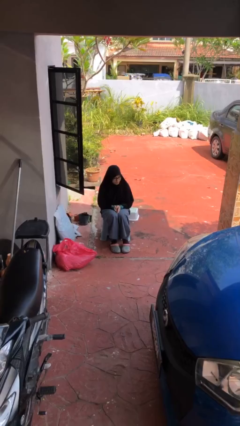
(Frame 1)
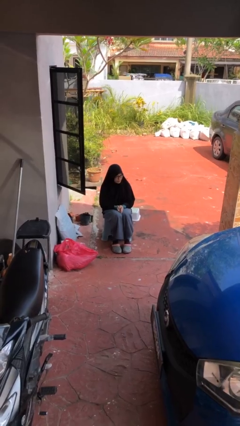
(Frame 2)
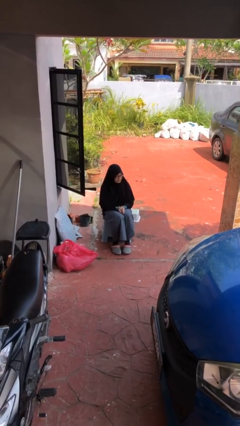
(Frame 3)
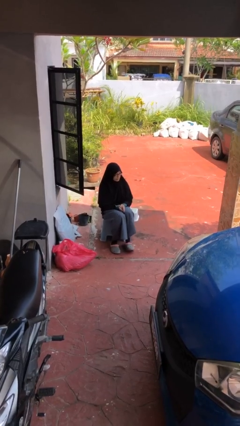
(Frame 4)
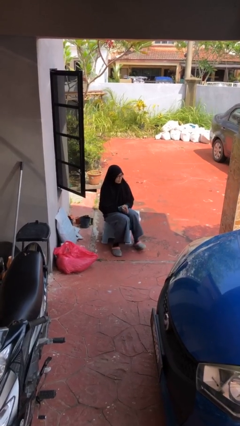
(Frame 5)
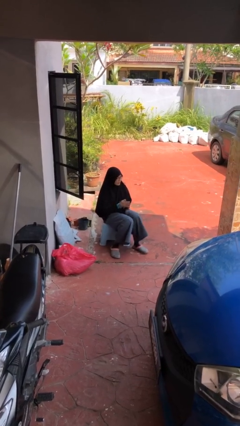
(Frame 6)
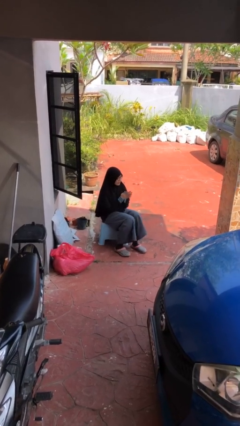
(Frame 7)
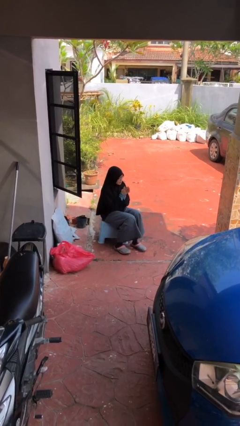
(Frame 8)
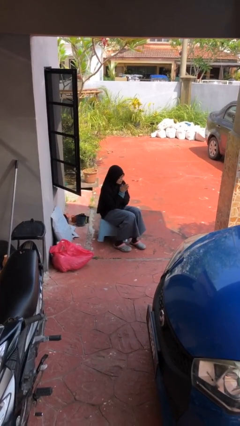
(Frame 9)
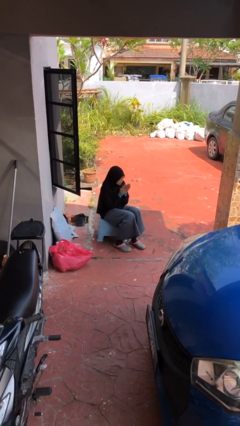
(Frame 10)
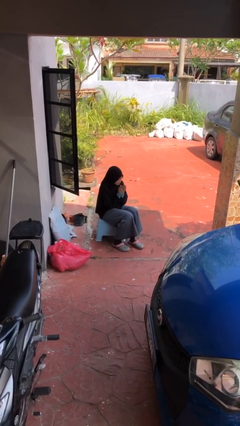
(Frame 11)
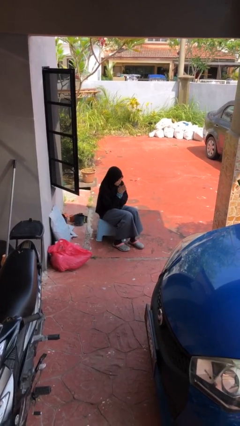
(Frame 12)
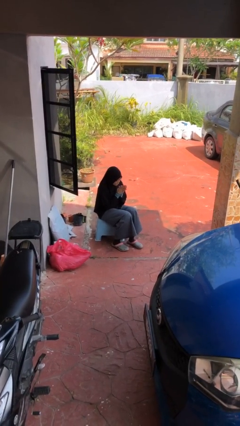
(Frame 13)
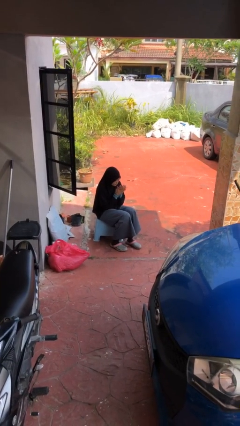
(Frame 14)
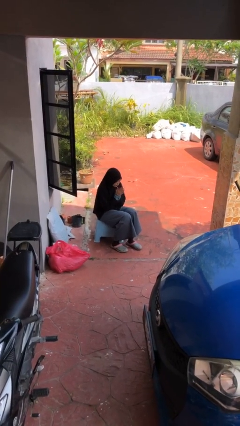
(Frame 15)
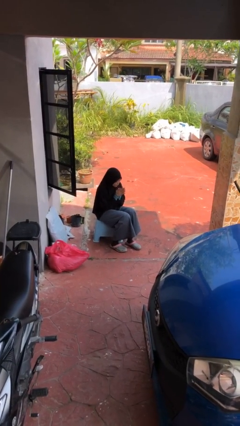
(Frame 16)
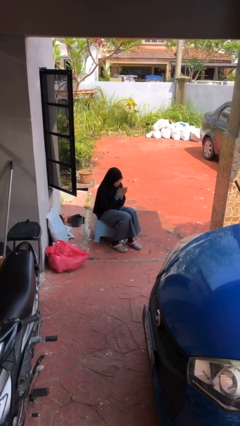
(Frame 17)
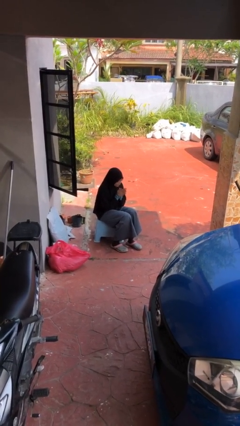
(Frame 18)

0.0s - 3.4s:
person blows into hands

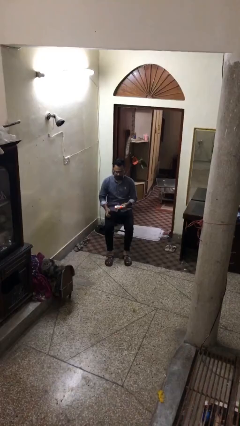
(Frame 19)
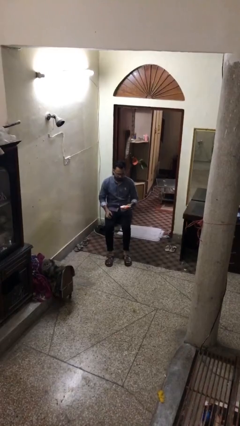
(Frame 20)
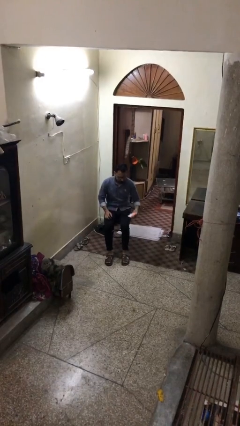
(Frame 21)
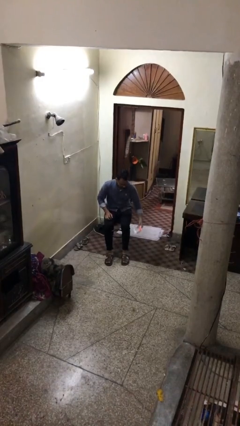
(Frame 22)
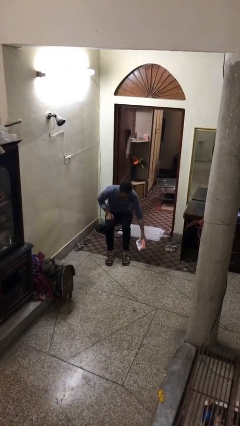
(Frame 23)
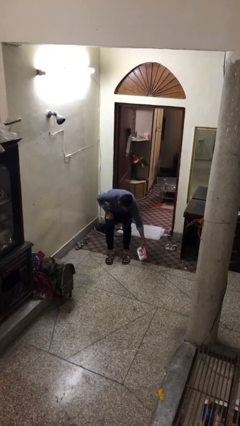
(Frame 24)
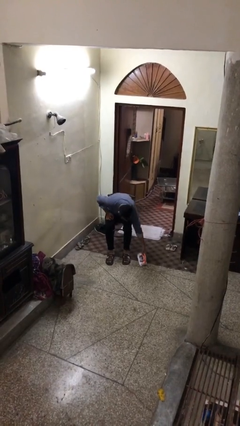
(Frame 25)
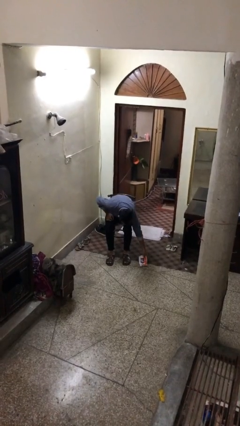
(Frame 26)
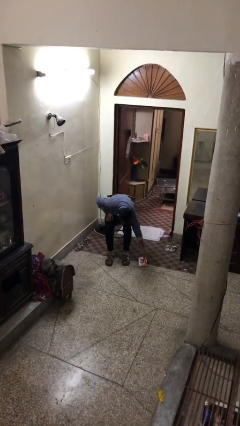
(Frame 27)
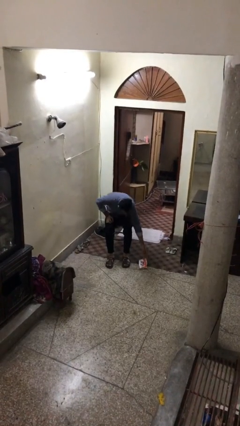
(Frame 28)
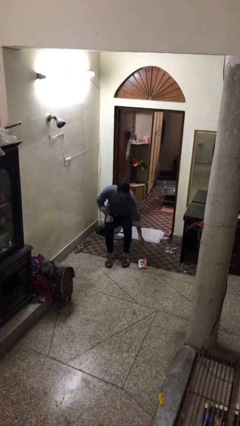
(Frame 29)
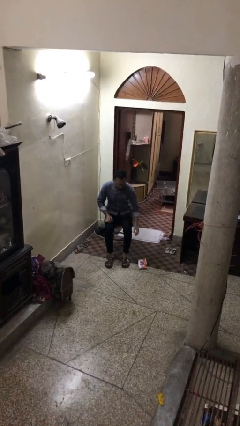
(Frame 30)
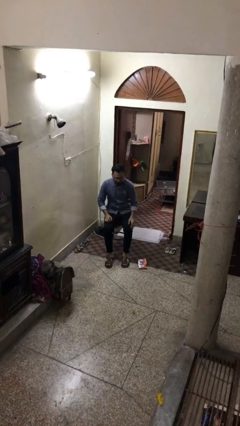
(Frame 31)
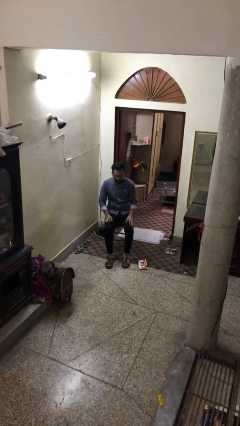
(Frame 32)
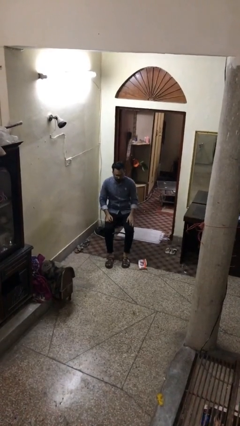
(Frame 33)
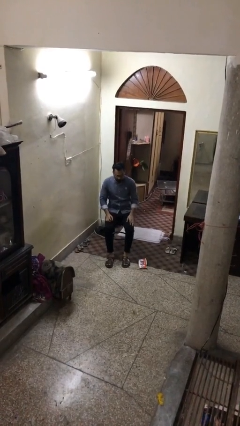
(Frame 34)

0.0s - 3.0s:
person puts down object on floor

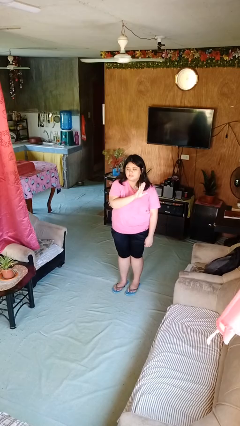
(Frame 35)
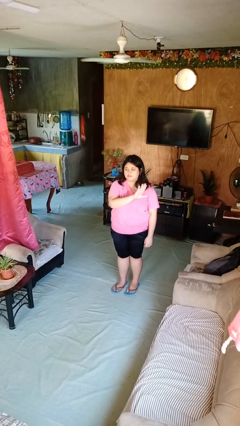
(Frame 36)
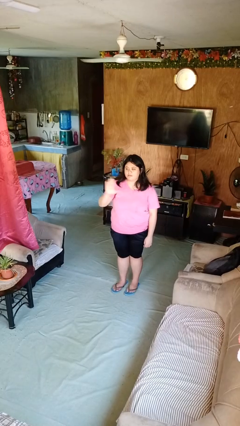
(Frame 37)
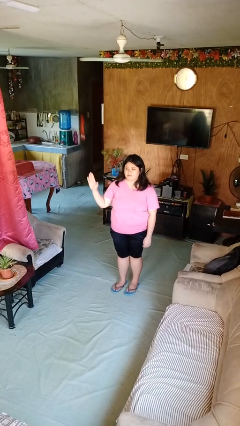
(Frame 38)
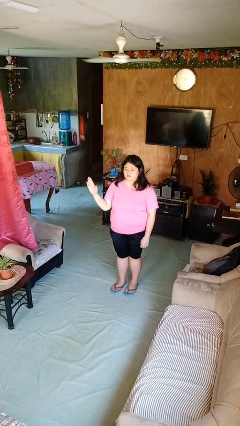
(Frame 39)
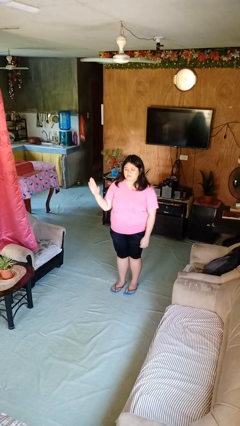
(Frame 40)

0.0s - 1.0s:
person gestures swipe right

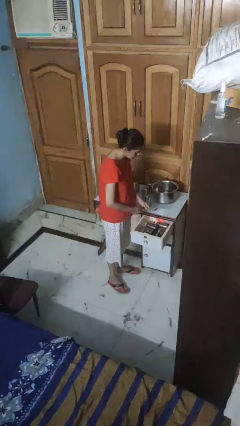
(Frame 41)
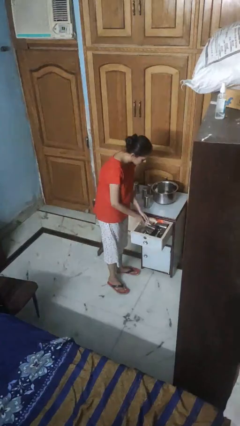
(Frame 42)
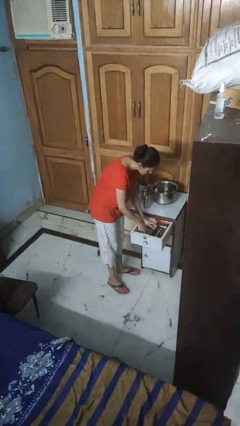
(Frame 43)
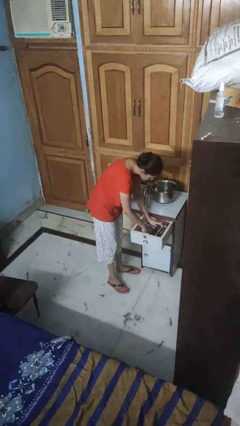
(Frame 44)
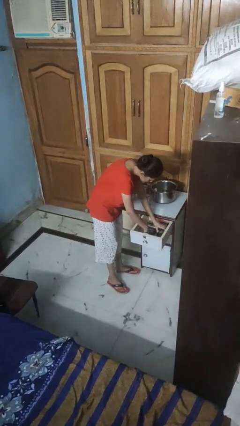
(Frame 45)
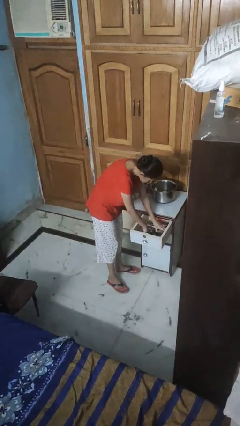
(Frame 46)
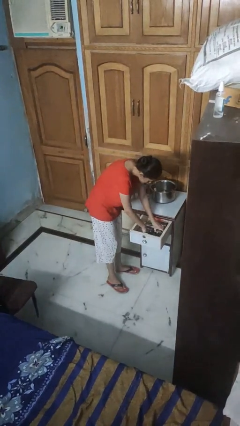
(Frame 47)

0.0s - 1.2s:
person puts object into kitchen drawer

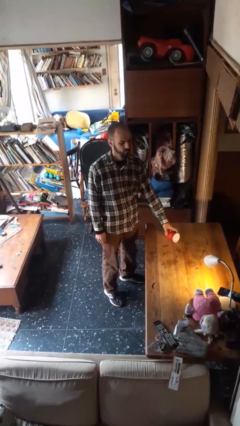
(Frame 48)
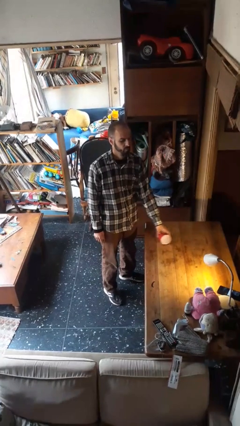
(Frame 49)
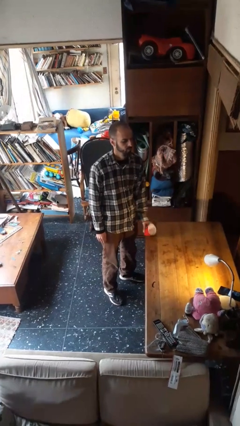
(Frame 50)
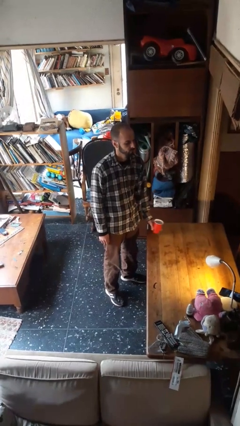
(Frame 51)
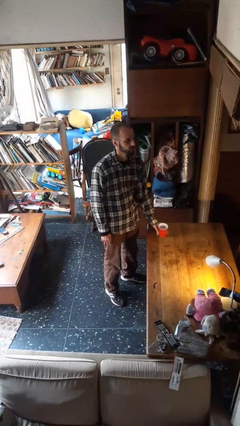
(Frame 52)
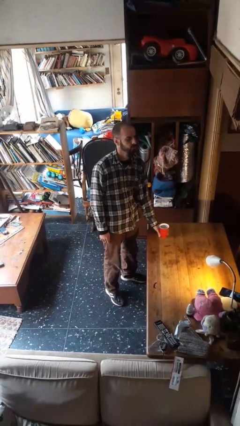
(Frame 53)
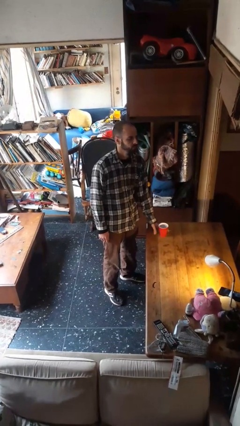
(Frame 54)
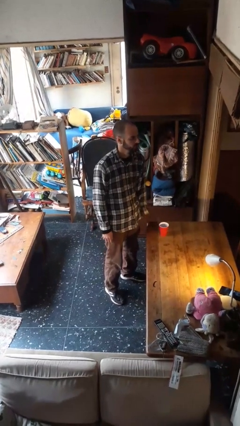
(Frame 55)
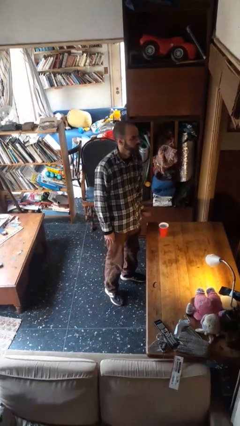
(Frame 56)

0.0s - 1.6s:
person sets upright glass

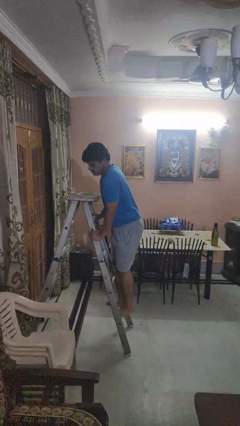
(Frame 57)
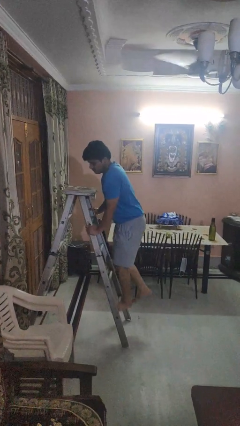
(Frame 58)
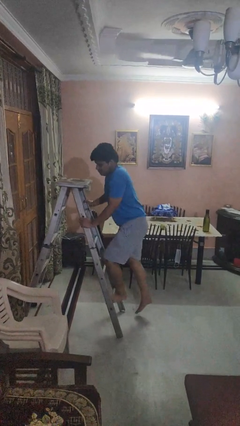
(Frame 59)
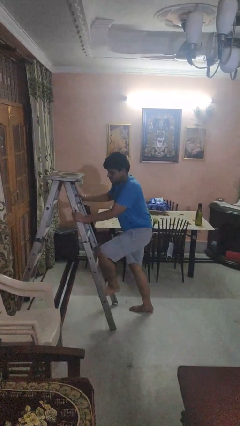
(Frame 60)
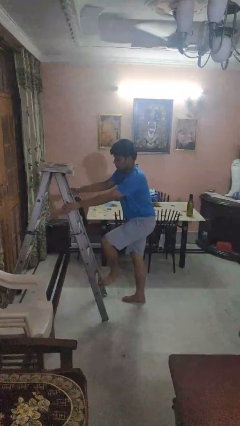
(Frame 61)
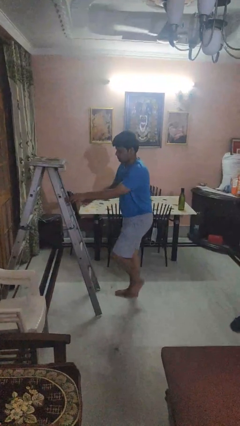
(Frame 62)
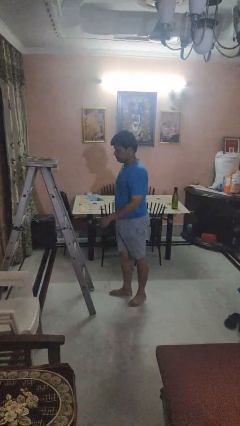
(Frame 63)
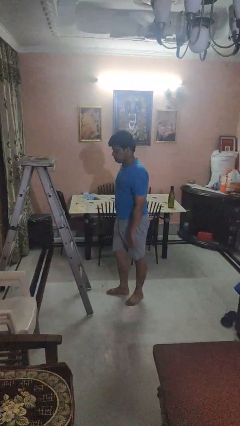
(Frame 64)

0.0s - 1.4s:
person climbs down ladder

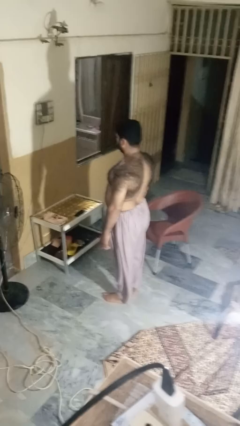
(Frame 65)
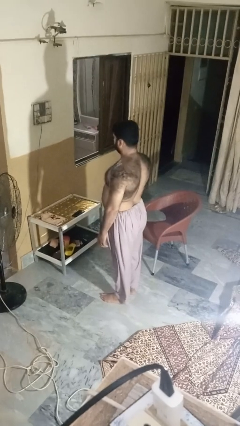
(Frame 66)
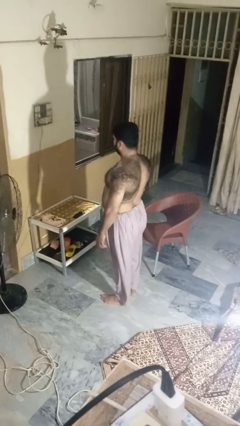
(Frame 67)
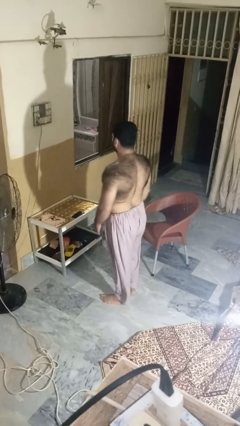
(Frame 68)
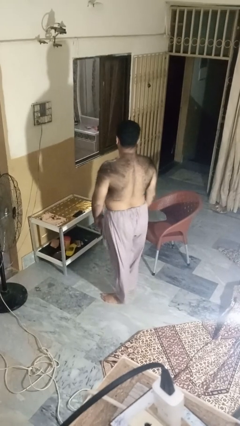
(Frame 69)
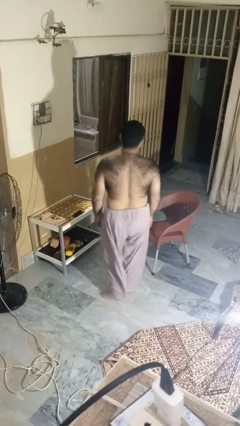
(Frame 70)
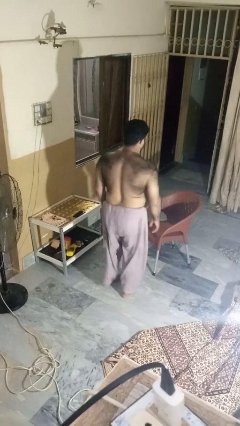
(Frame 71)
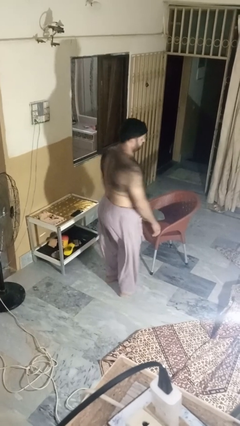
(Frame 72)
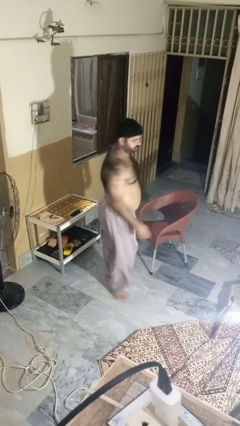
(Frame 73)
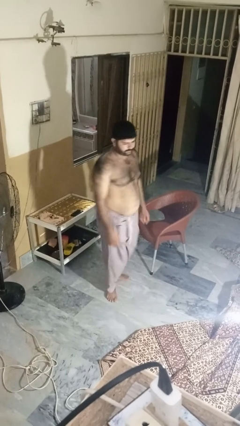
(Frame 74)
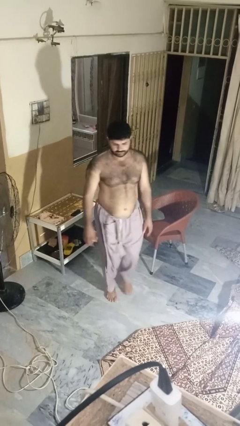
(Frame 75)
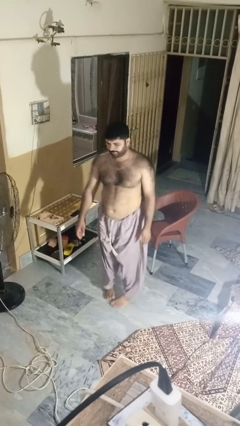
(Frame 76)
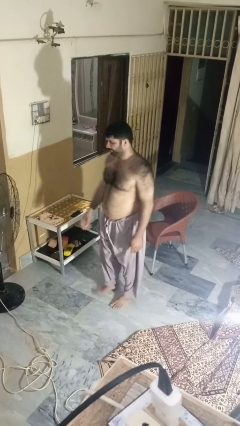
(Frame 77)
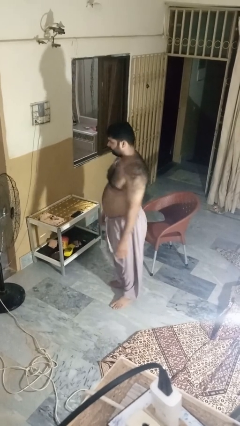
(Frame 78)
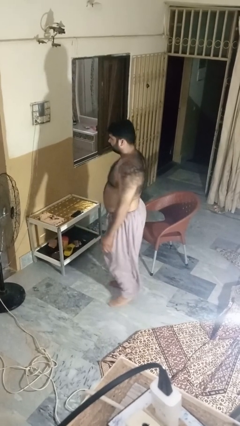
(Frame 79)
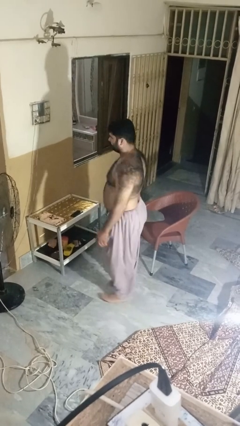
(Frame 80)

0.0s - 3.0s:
person twirls

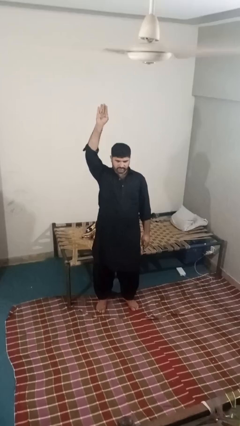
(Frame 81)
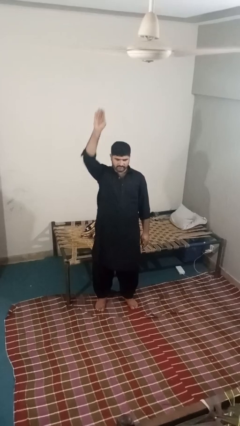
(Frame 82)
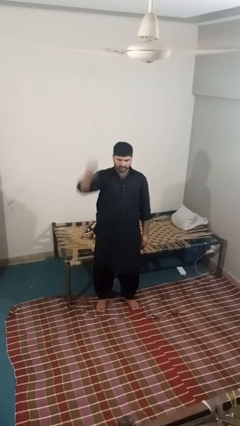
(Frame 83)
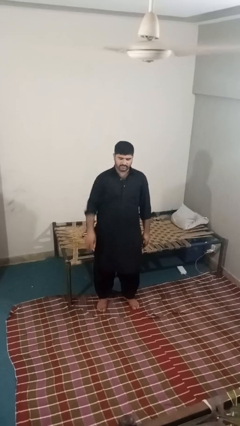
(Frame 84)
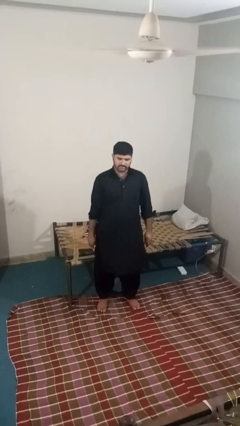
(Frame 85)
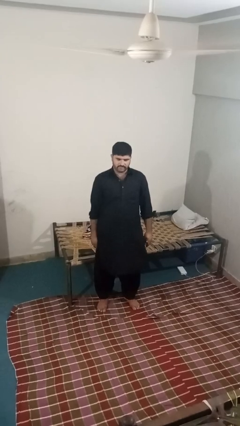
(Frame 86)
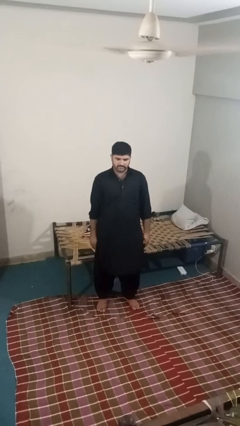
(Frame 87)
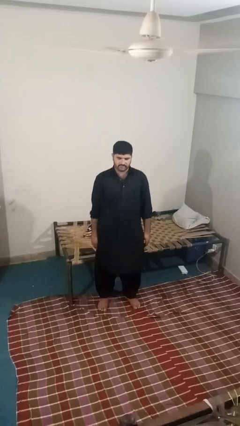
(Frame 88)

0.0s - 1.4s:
person gestures lower hand

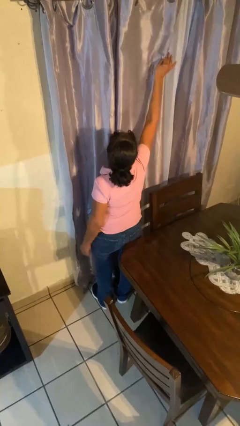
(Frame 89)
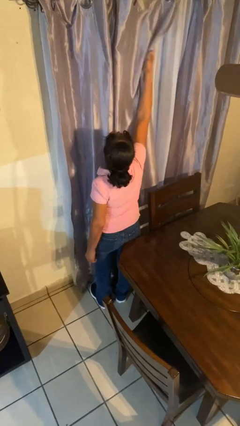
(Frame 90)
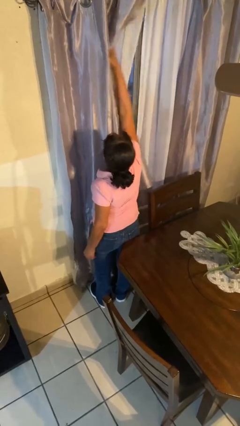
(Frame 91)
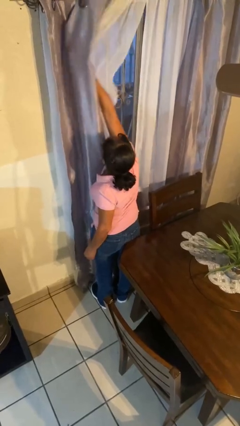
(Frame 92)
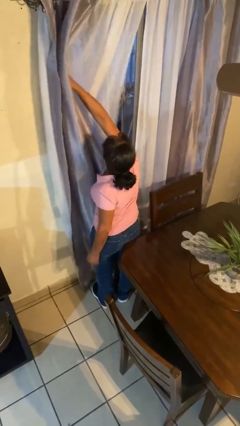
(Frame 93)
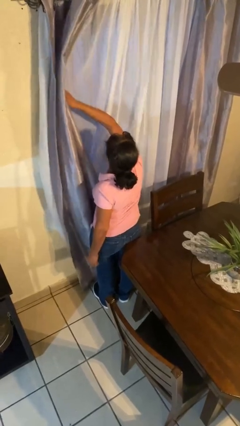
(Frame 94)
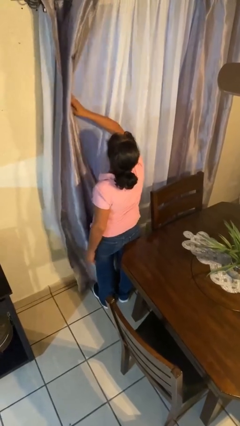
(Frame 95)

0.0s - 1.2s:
person opens curtains
